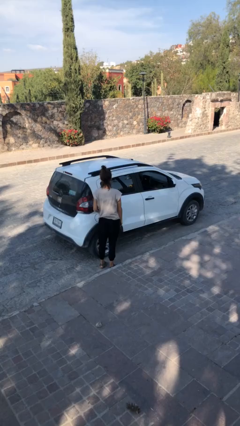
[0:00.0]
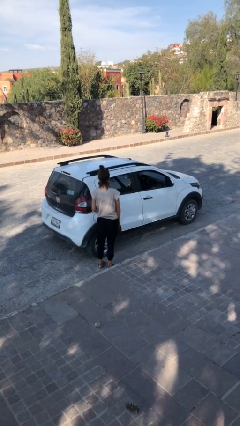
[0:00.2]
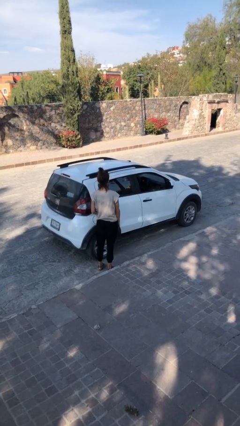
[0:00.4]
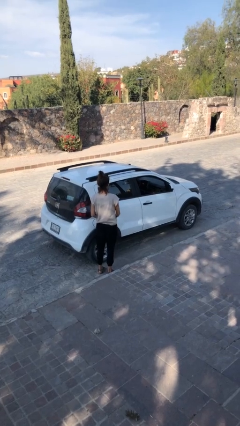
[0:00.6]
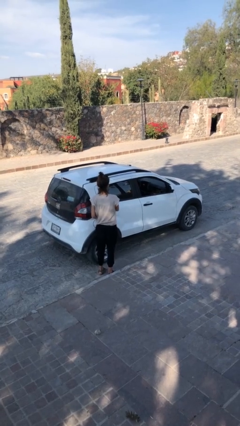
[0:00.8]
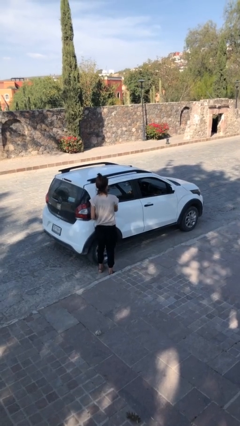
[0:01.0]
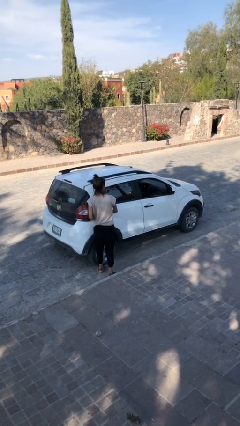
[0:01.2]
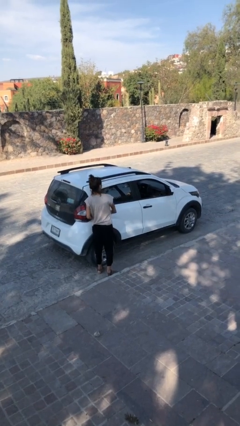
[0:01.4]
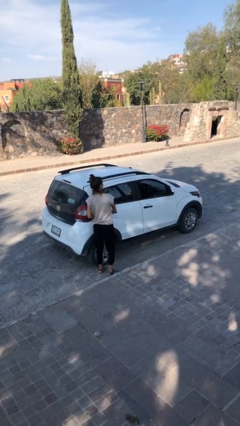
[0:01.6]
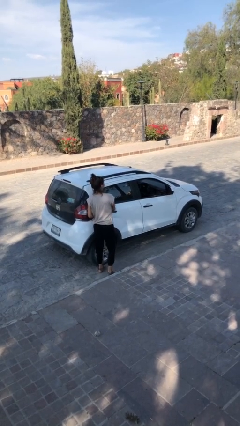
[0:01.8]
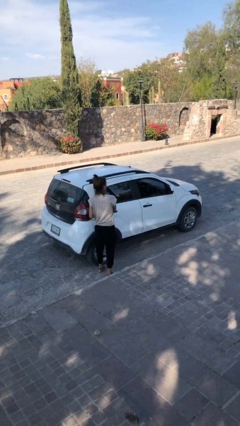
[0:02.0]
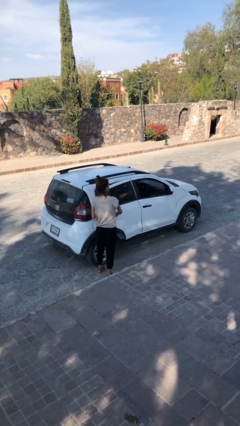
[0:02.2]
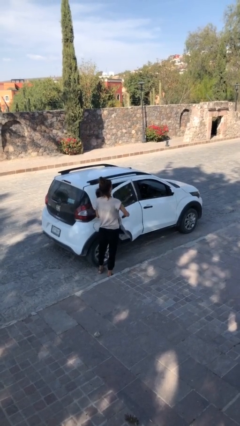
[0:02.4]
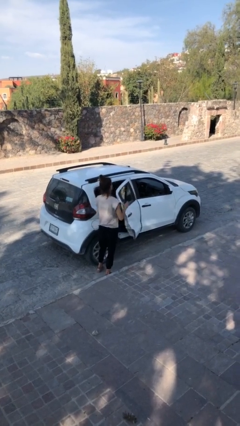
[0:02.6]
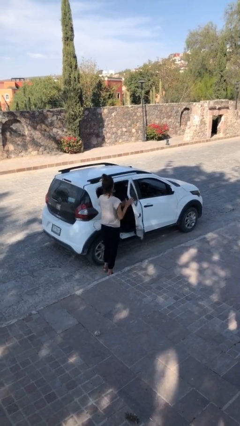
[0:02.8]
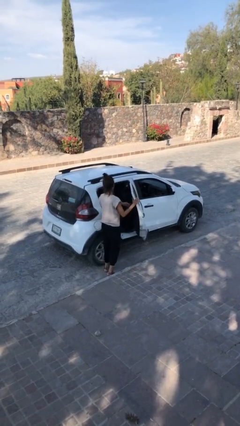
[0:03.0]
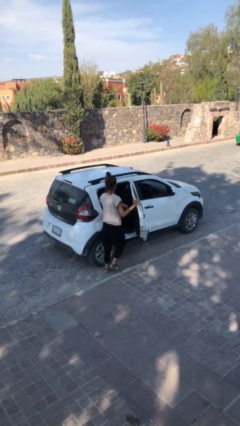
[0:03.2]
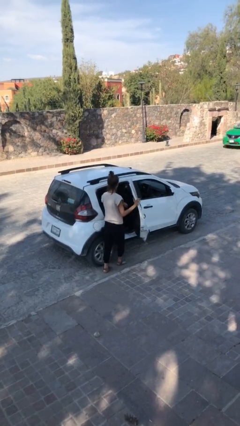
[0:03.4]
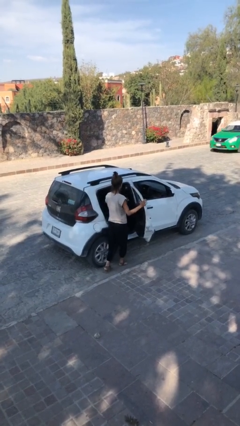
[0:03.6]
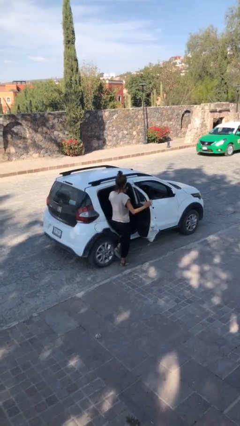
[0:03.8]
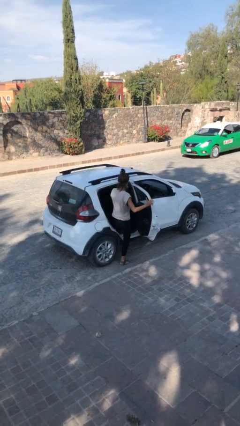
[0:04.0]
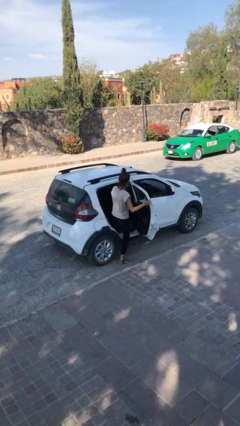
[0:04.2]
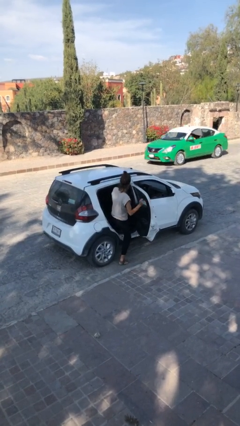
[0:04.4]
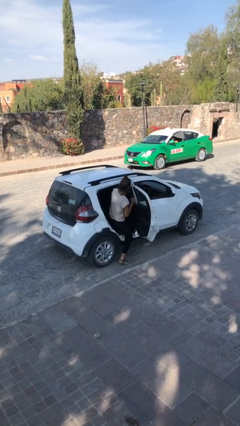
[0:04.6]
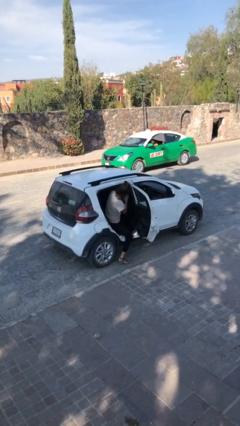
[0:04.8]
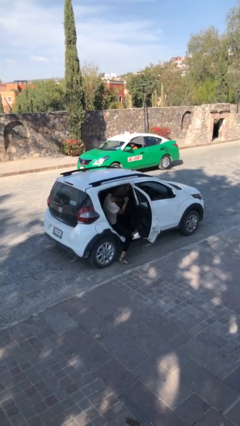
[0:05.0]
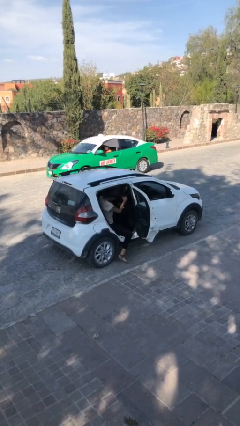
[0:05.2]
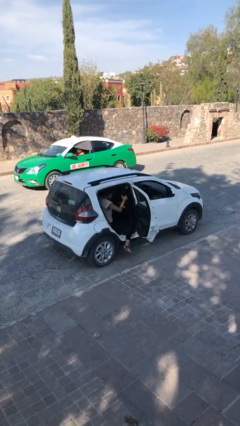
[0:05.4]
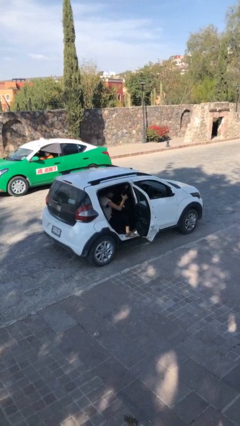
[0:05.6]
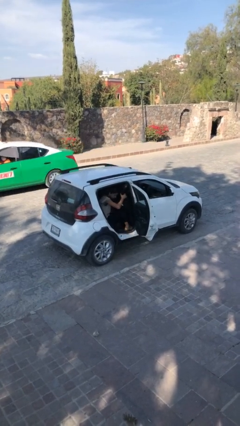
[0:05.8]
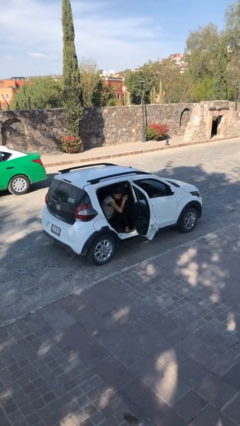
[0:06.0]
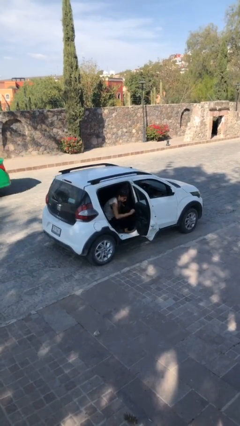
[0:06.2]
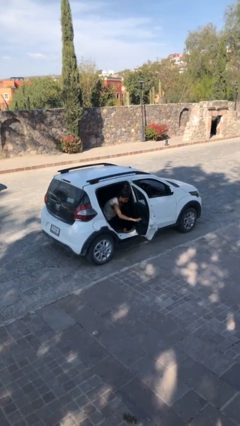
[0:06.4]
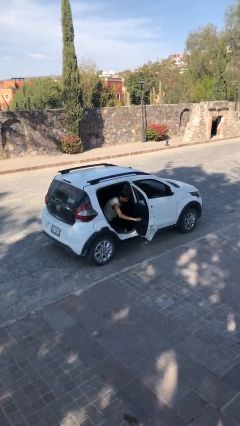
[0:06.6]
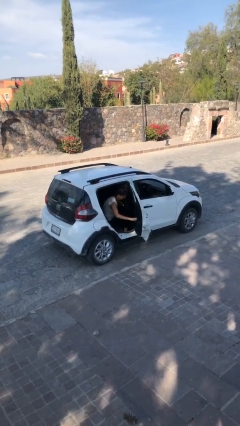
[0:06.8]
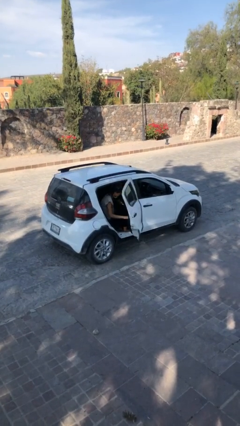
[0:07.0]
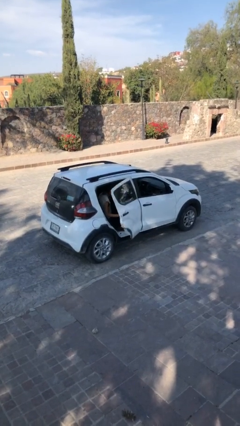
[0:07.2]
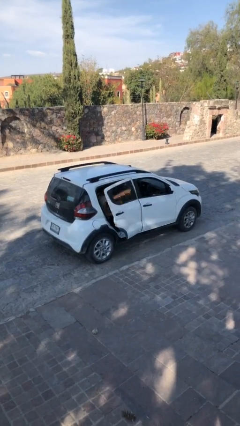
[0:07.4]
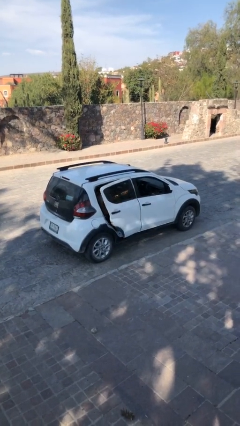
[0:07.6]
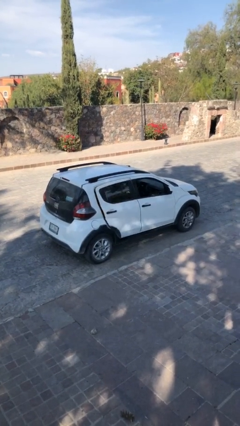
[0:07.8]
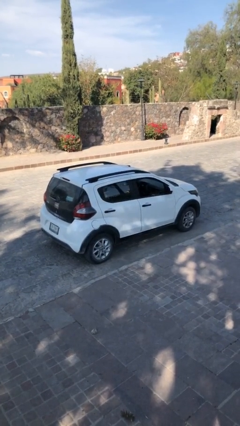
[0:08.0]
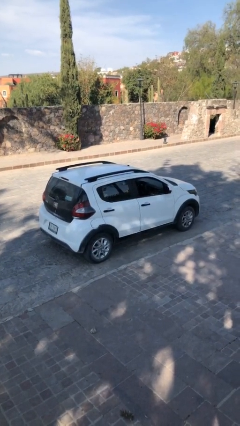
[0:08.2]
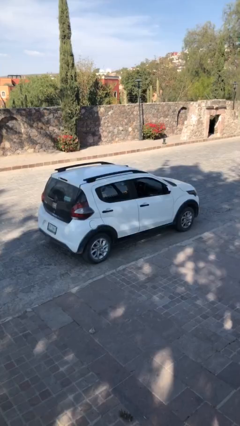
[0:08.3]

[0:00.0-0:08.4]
car picks up person

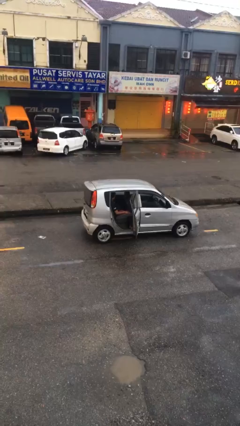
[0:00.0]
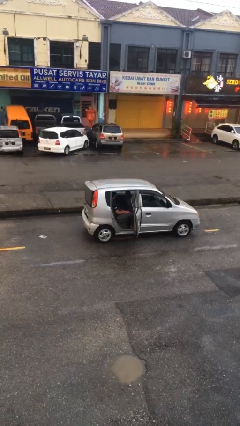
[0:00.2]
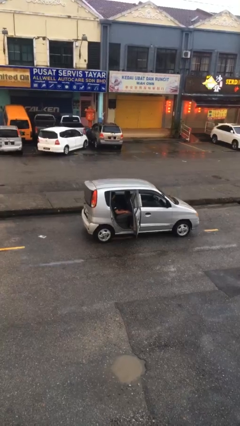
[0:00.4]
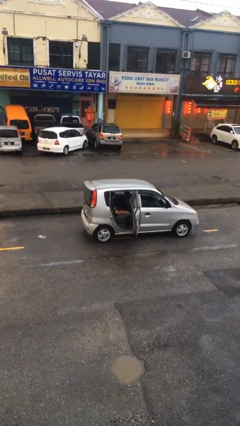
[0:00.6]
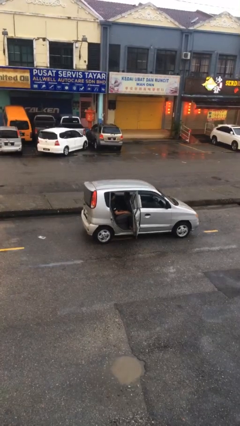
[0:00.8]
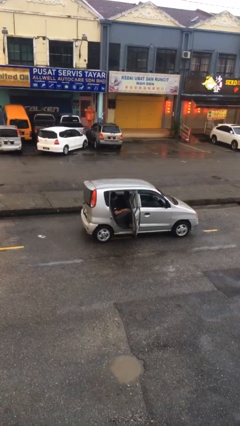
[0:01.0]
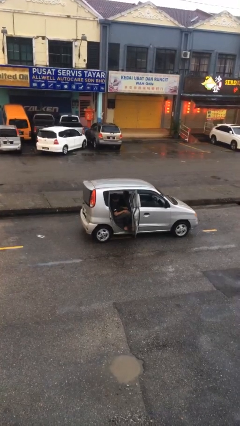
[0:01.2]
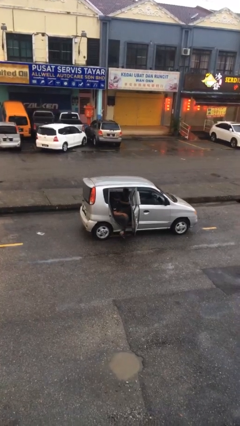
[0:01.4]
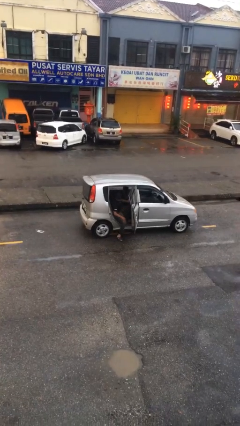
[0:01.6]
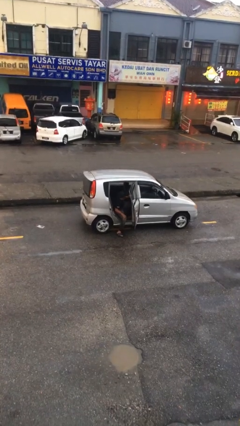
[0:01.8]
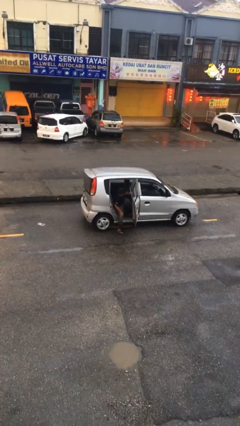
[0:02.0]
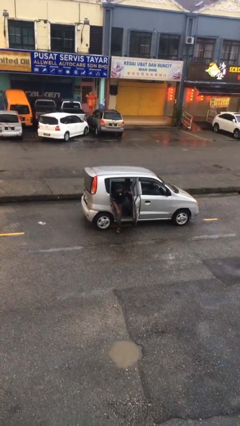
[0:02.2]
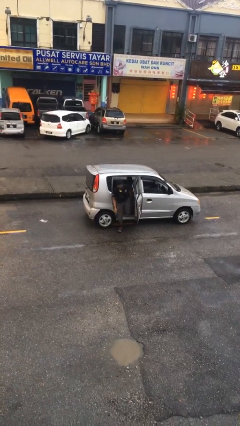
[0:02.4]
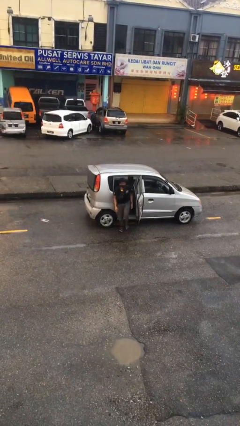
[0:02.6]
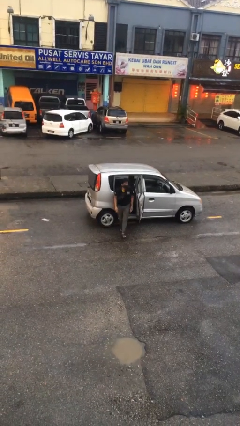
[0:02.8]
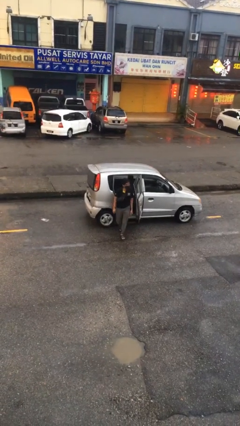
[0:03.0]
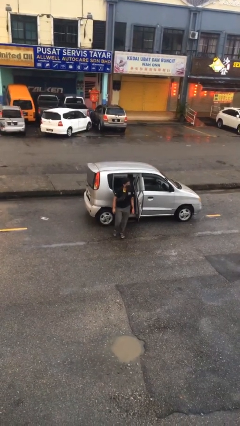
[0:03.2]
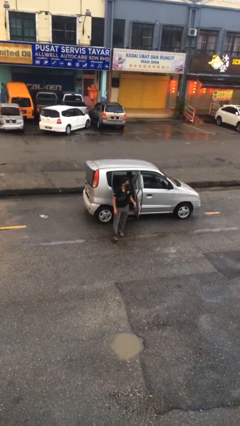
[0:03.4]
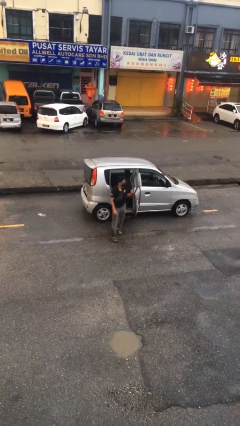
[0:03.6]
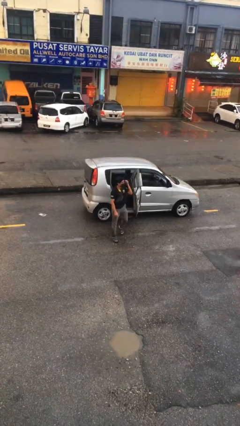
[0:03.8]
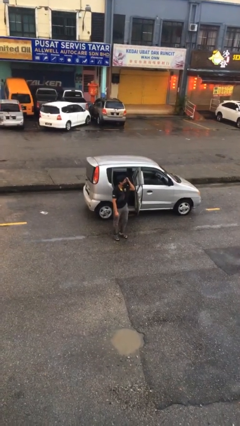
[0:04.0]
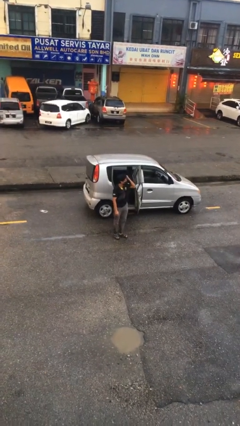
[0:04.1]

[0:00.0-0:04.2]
person exits car

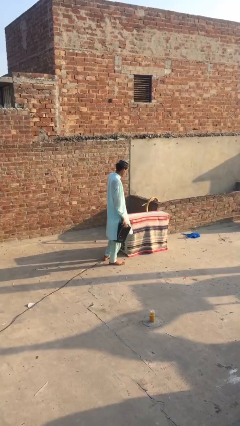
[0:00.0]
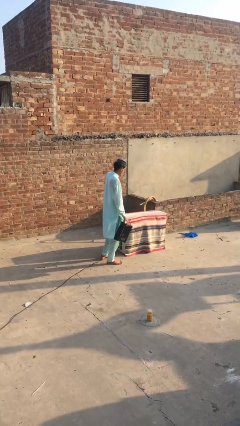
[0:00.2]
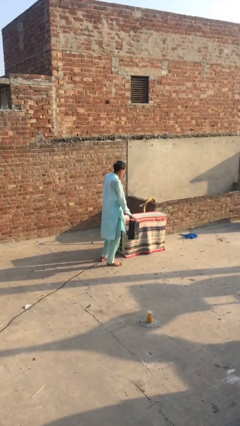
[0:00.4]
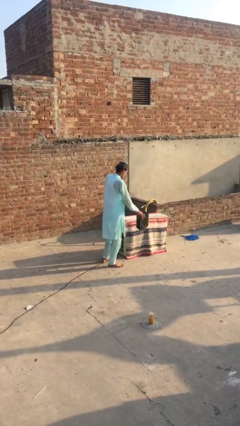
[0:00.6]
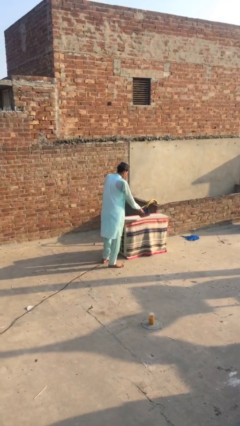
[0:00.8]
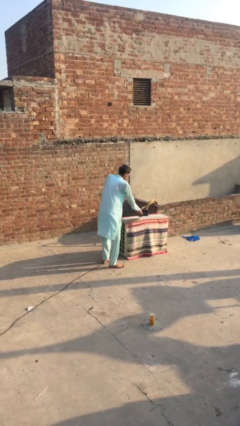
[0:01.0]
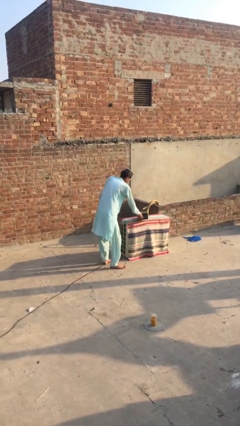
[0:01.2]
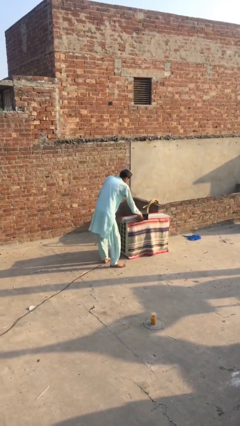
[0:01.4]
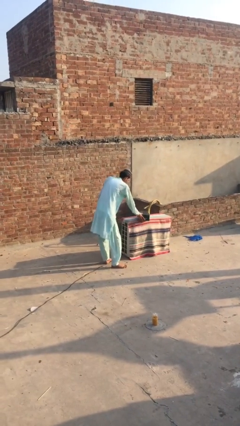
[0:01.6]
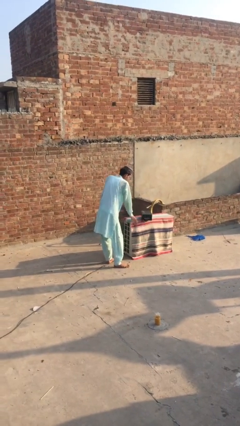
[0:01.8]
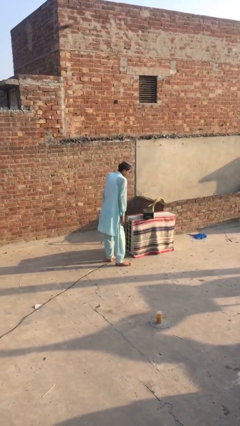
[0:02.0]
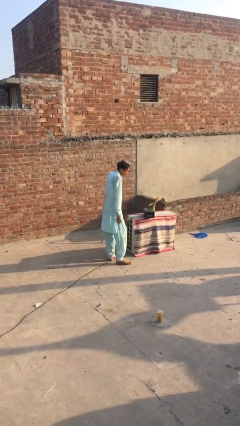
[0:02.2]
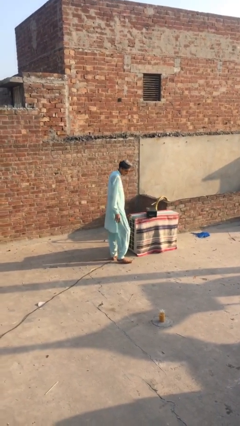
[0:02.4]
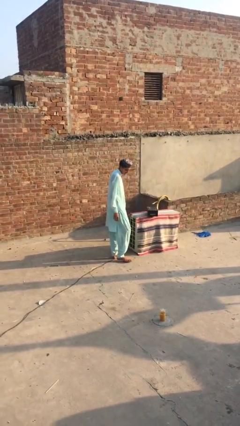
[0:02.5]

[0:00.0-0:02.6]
person puts down object on table

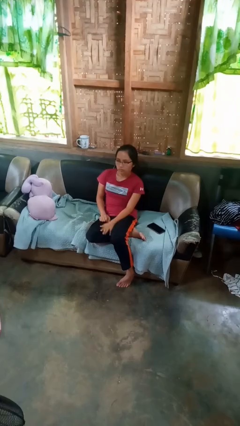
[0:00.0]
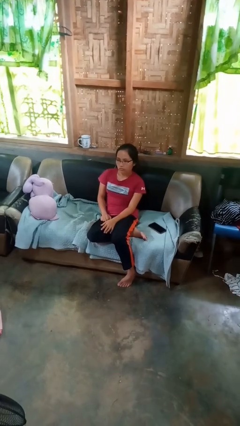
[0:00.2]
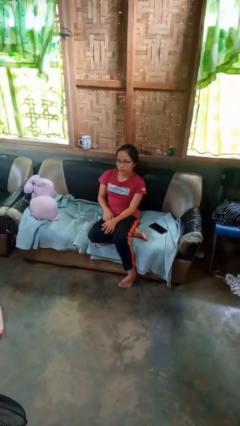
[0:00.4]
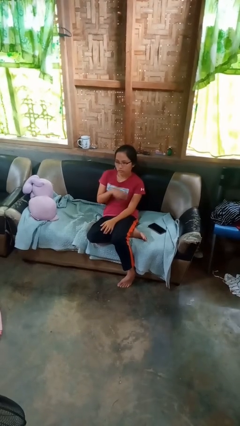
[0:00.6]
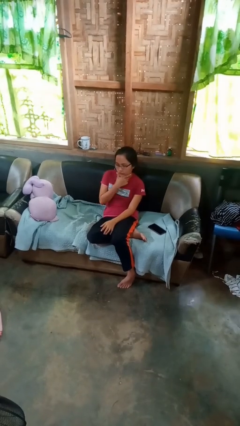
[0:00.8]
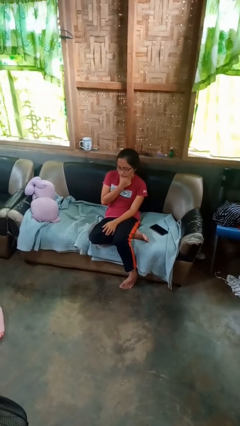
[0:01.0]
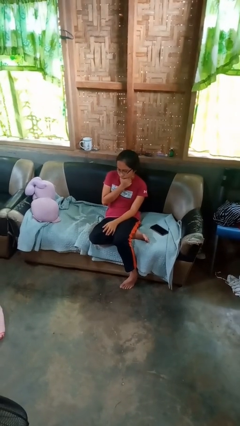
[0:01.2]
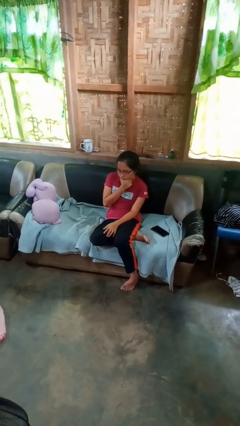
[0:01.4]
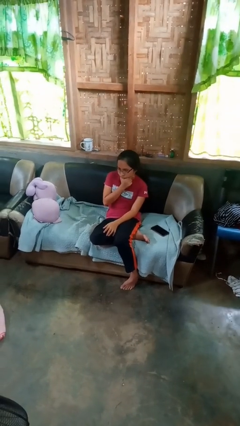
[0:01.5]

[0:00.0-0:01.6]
person strokes chin

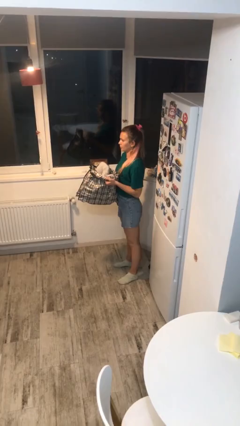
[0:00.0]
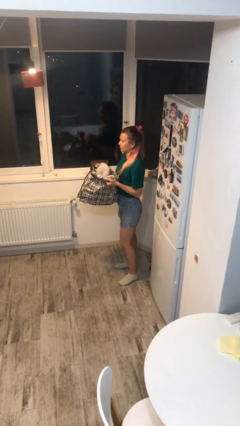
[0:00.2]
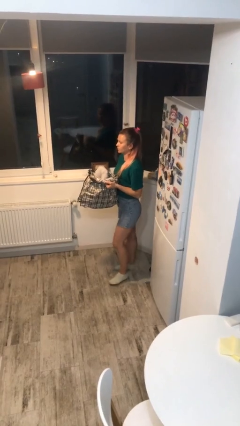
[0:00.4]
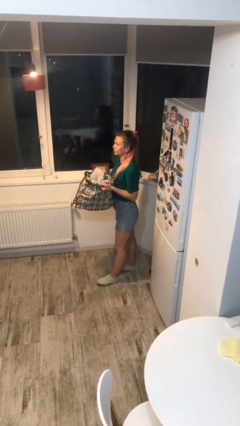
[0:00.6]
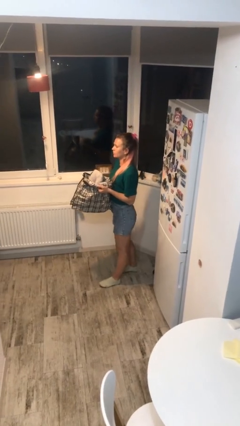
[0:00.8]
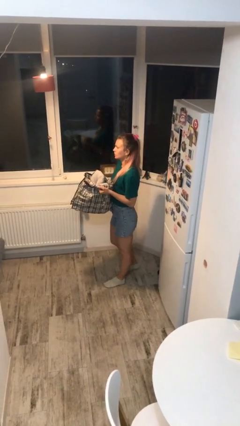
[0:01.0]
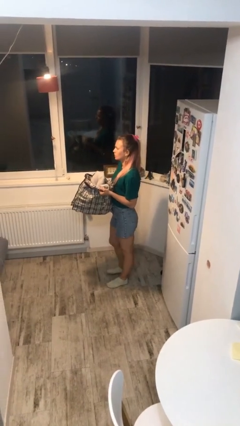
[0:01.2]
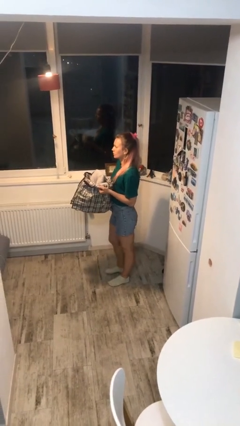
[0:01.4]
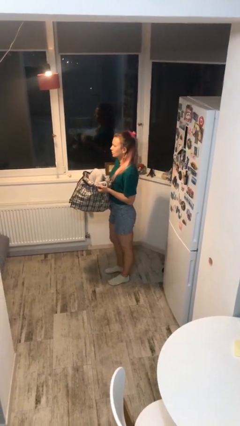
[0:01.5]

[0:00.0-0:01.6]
person carries laundry basket
